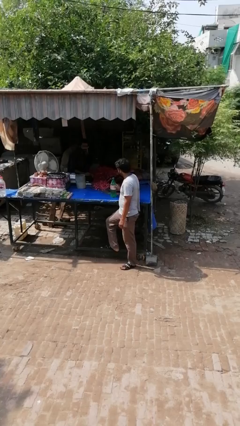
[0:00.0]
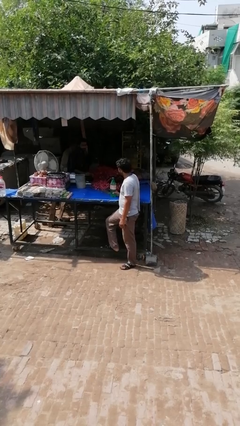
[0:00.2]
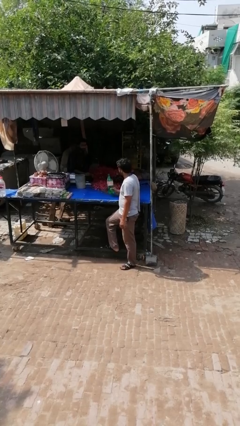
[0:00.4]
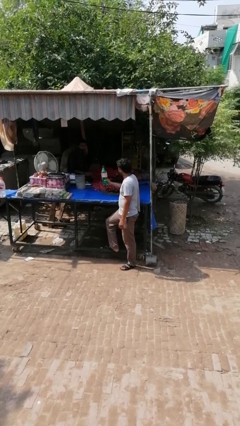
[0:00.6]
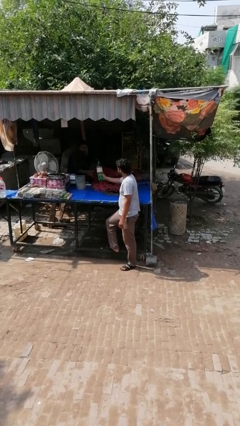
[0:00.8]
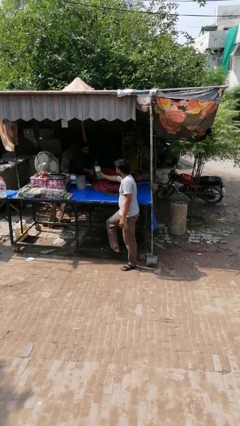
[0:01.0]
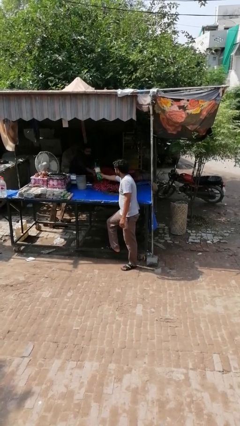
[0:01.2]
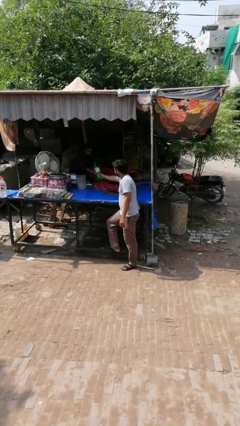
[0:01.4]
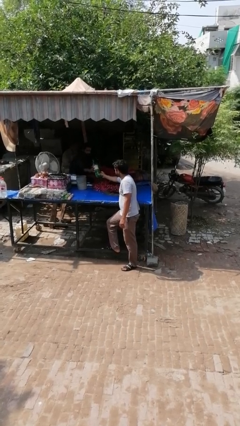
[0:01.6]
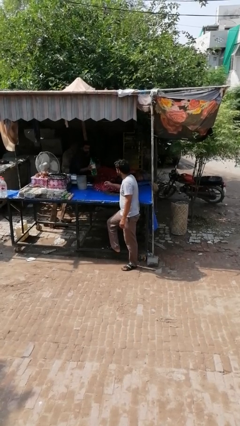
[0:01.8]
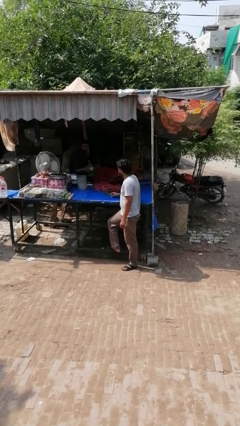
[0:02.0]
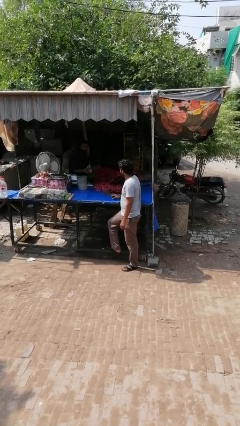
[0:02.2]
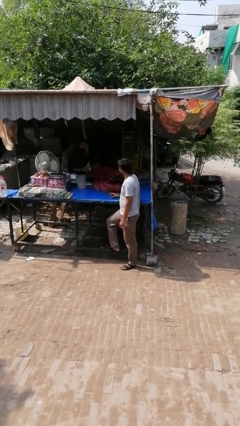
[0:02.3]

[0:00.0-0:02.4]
person transfers object to person

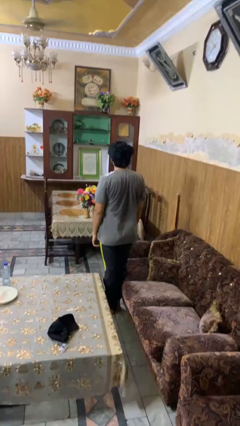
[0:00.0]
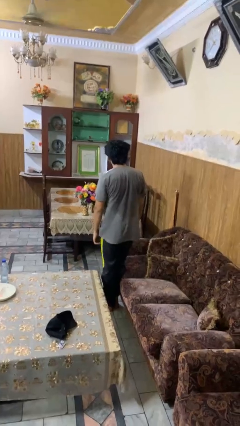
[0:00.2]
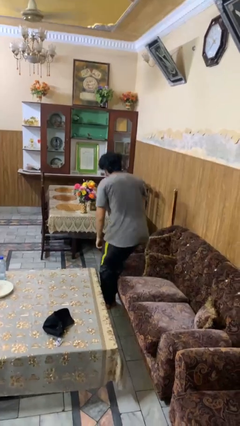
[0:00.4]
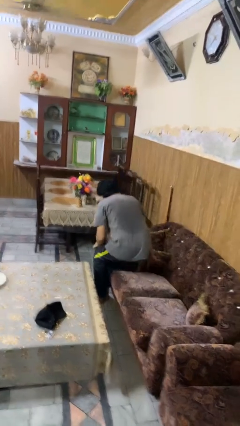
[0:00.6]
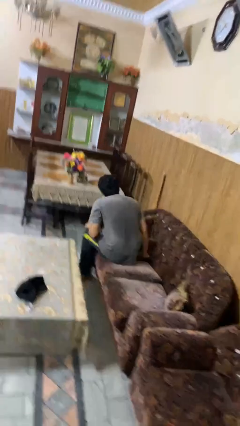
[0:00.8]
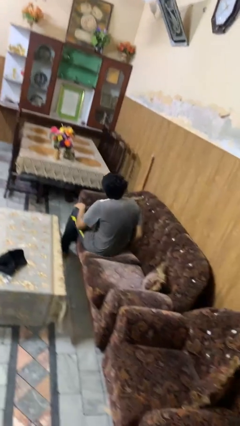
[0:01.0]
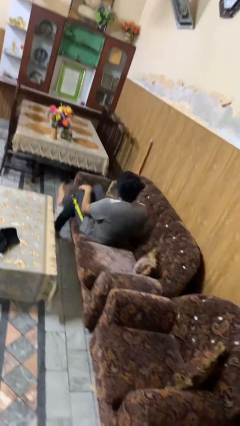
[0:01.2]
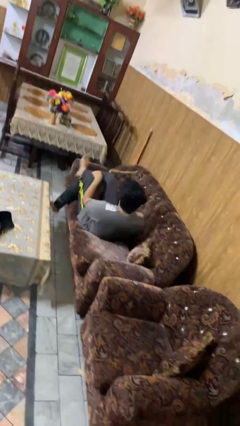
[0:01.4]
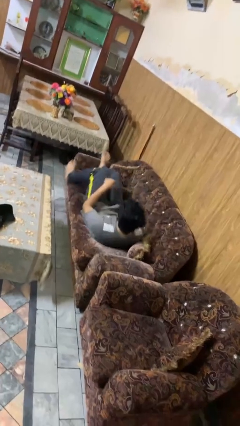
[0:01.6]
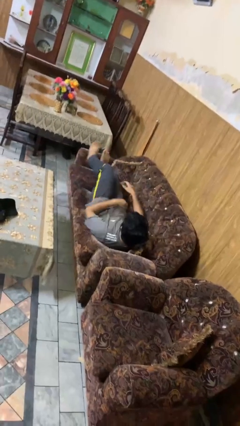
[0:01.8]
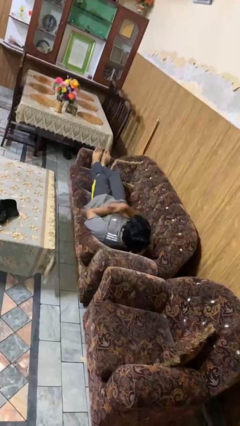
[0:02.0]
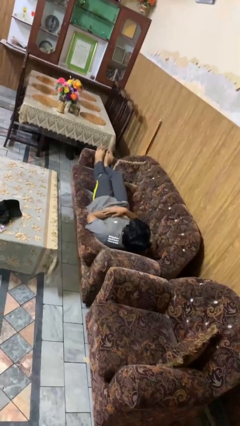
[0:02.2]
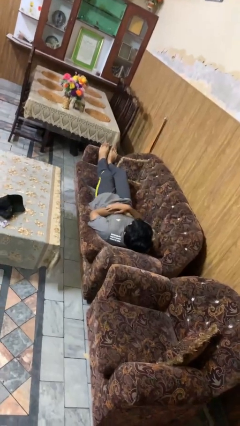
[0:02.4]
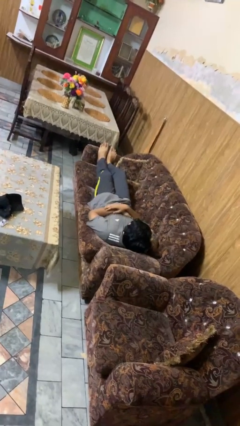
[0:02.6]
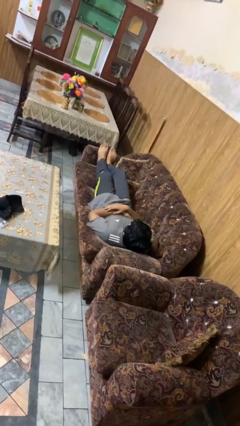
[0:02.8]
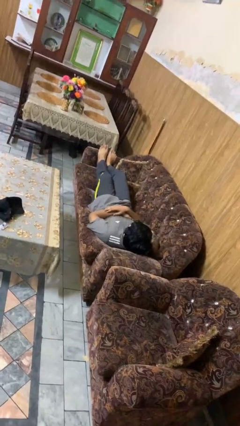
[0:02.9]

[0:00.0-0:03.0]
person lies down on couch

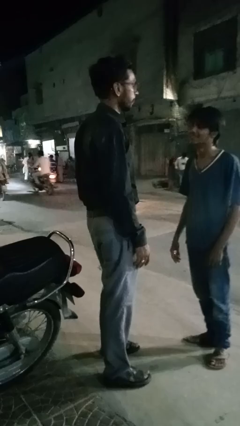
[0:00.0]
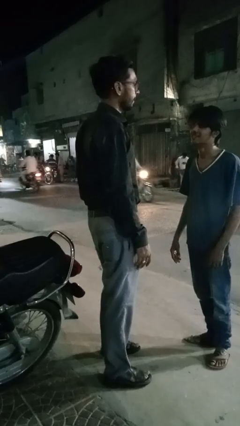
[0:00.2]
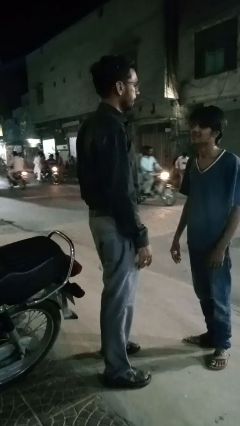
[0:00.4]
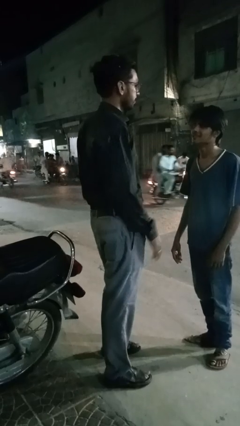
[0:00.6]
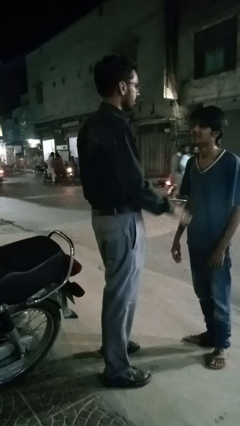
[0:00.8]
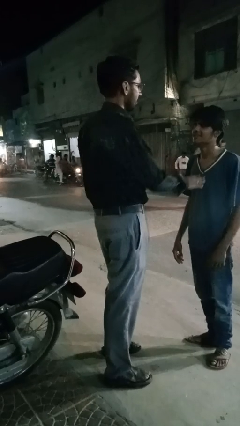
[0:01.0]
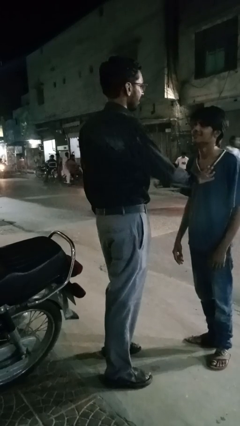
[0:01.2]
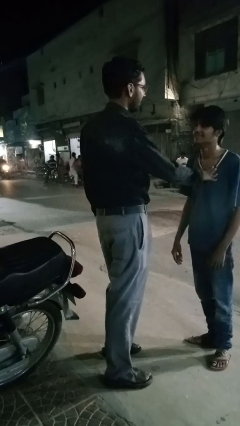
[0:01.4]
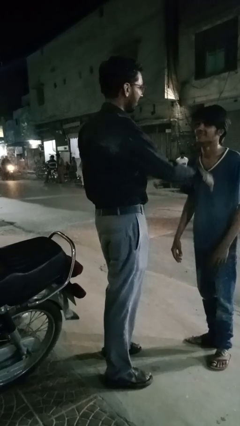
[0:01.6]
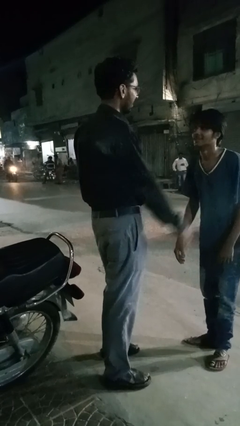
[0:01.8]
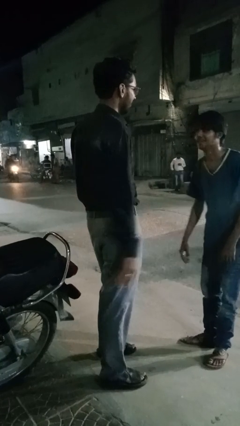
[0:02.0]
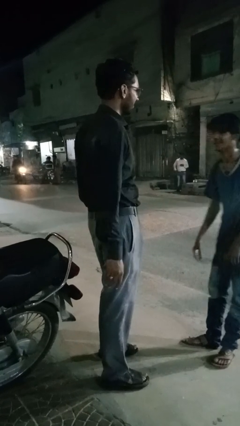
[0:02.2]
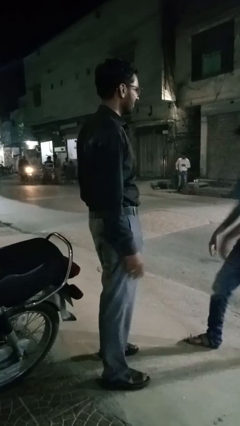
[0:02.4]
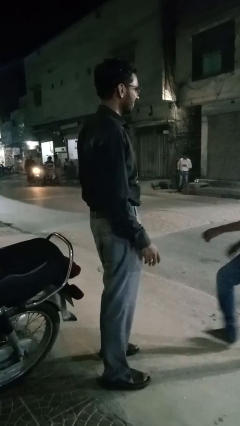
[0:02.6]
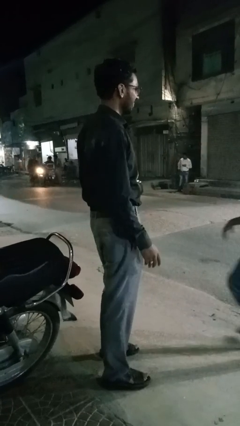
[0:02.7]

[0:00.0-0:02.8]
person shoves person

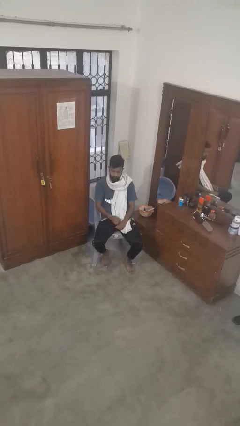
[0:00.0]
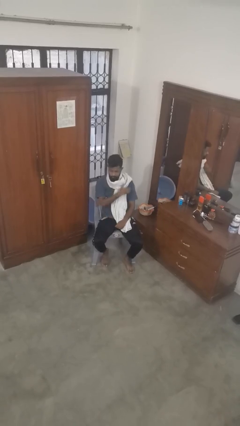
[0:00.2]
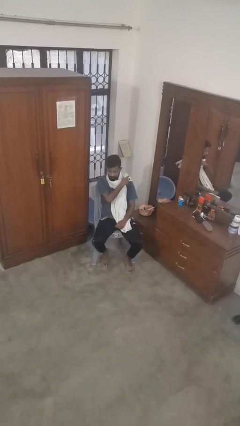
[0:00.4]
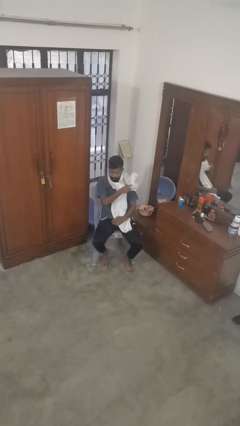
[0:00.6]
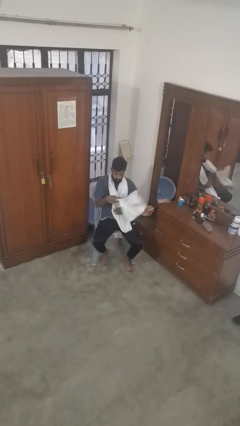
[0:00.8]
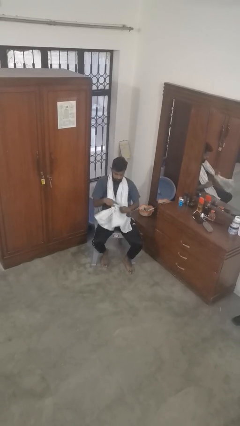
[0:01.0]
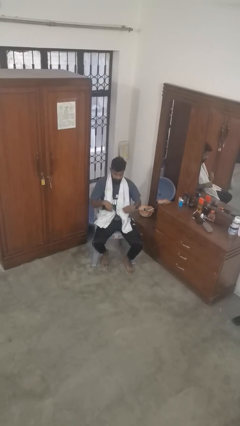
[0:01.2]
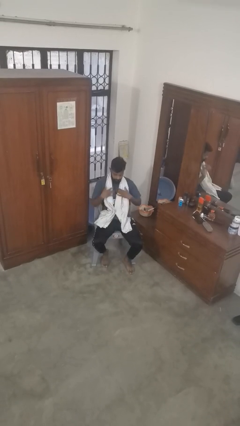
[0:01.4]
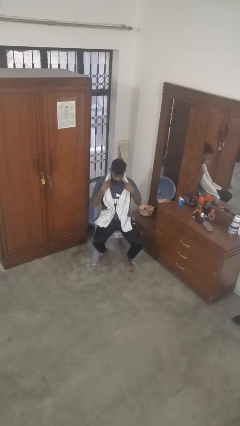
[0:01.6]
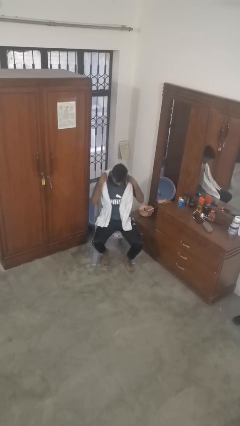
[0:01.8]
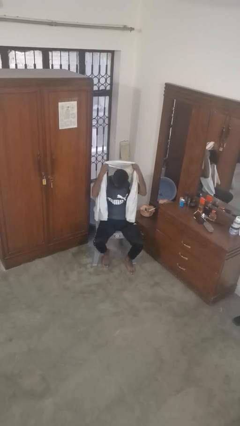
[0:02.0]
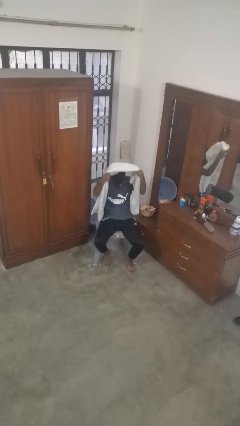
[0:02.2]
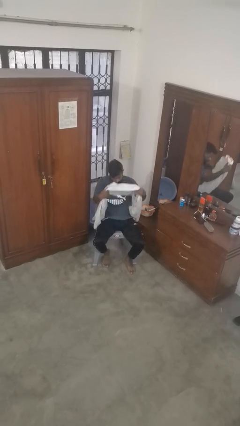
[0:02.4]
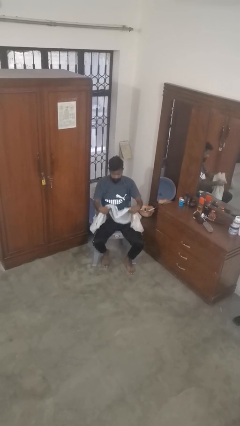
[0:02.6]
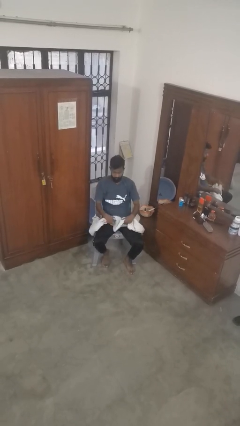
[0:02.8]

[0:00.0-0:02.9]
person takes off scarf

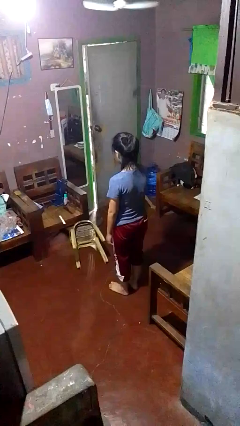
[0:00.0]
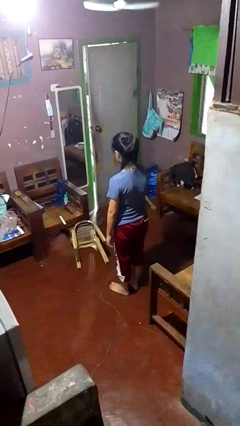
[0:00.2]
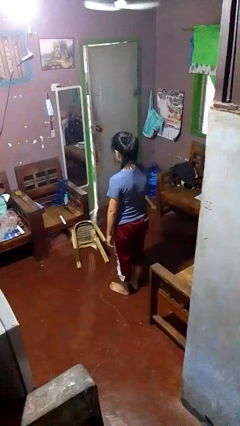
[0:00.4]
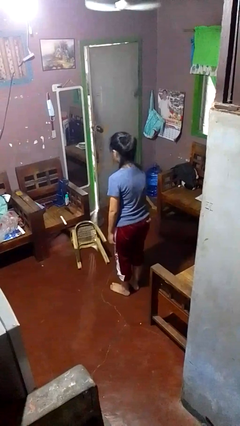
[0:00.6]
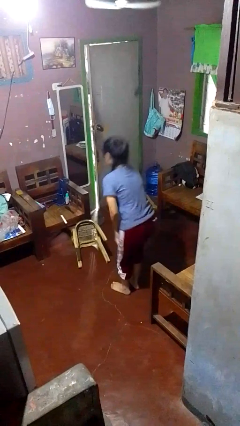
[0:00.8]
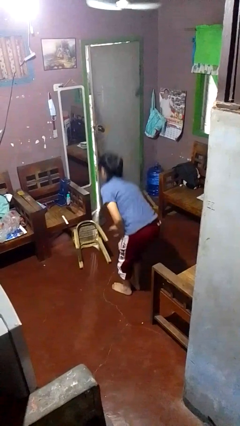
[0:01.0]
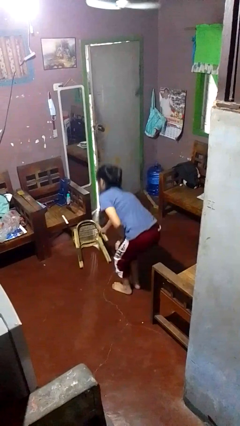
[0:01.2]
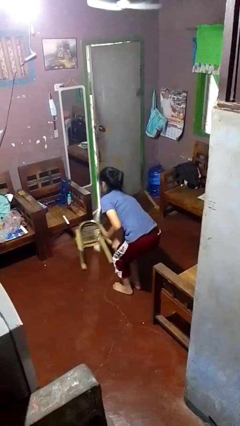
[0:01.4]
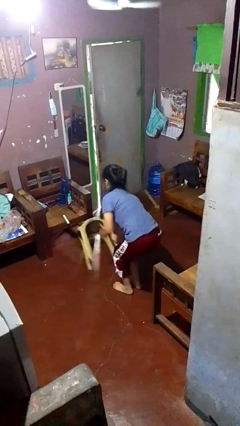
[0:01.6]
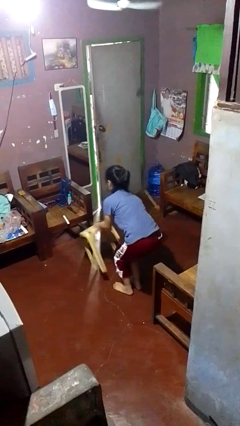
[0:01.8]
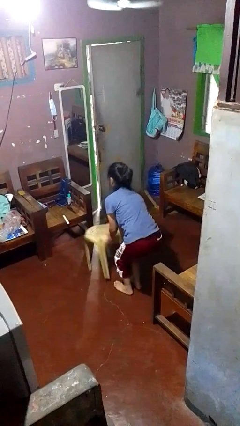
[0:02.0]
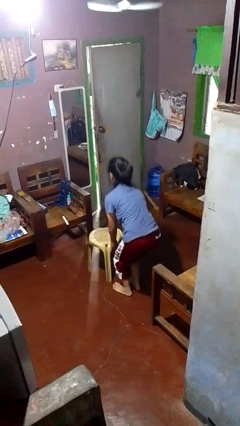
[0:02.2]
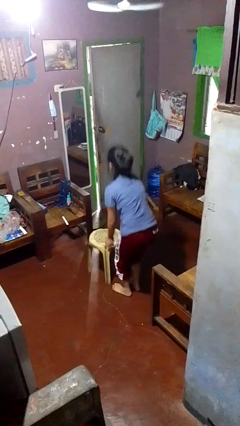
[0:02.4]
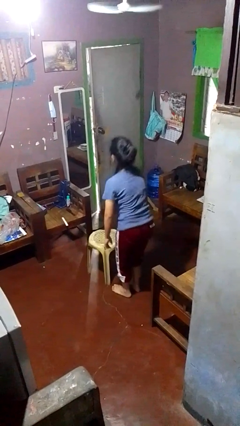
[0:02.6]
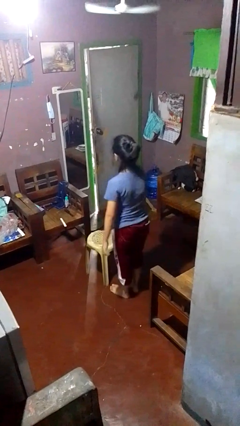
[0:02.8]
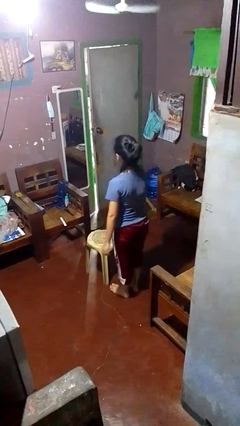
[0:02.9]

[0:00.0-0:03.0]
person sets upright furniture

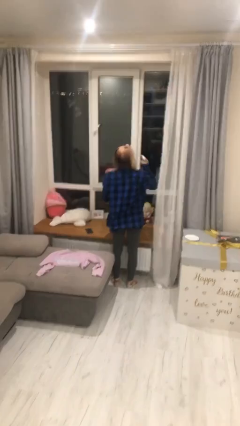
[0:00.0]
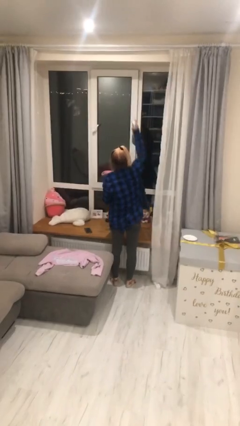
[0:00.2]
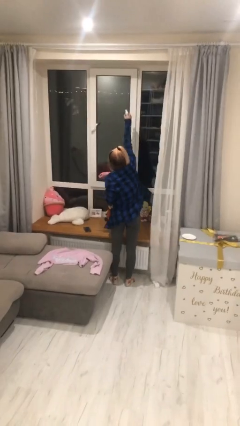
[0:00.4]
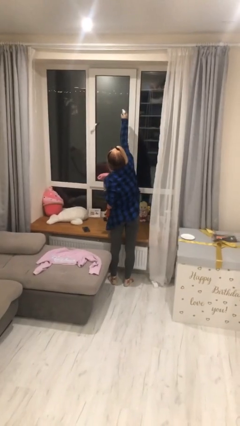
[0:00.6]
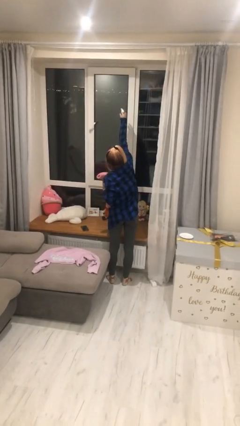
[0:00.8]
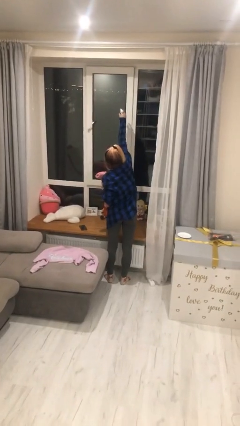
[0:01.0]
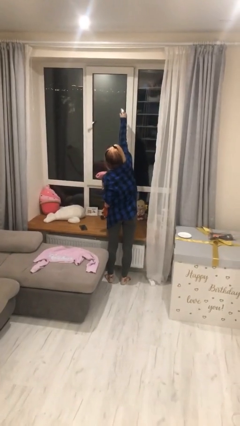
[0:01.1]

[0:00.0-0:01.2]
person sprays from bottle

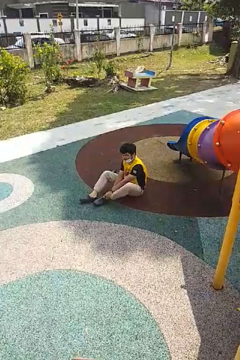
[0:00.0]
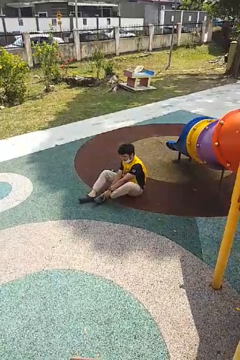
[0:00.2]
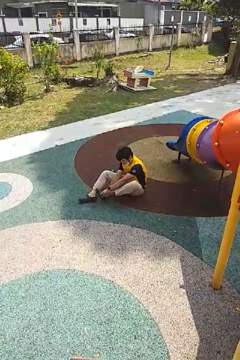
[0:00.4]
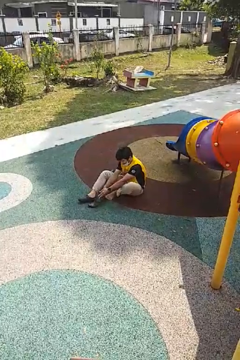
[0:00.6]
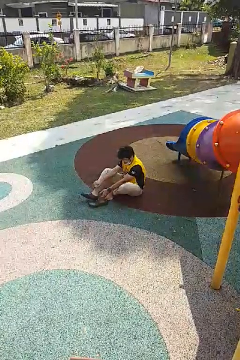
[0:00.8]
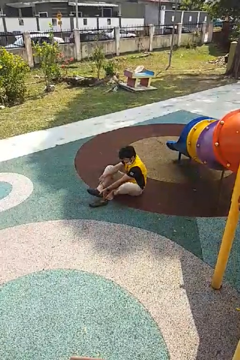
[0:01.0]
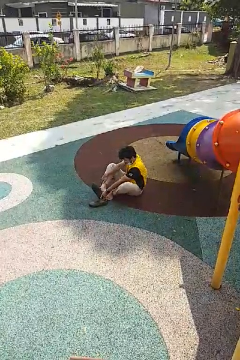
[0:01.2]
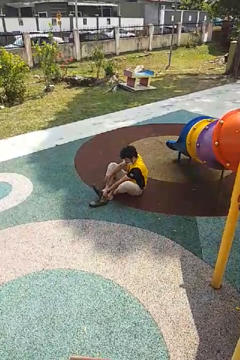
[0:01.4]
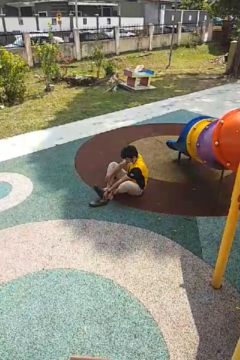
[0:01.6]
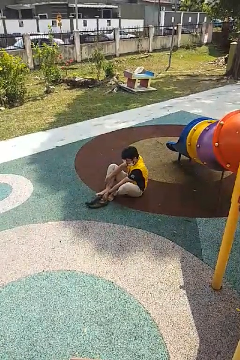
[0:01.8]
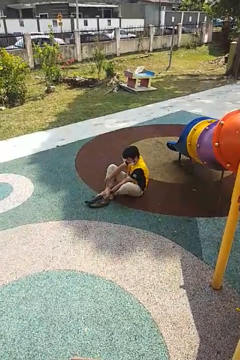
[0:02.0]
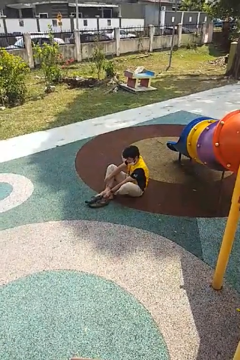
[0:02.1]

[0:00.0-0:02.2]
person takes off shoes
